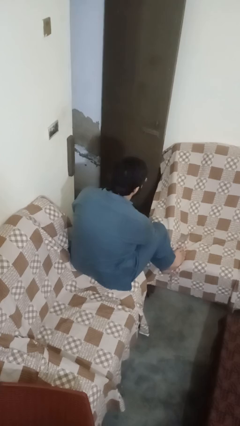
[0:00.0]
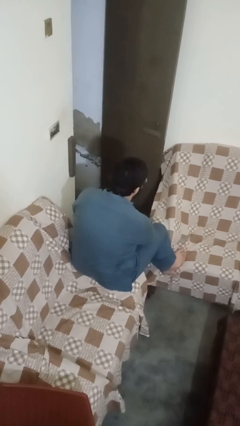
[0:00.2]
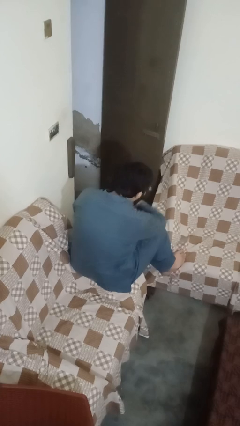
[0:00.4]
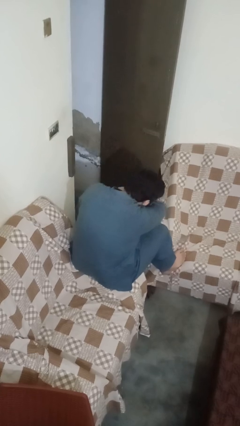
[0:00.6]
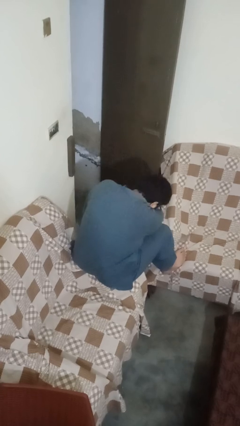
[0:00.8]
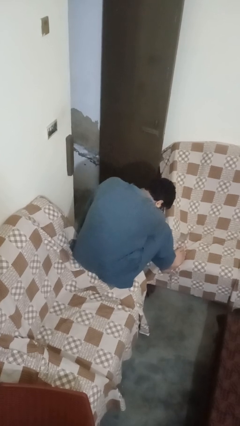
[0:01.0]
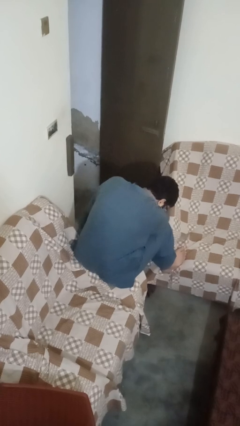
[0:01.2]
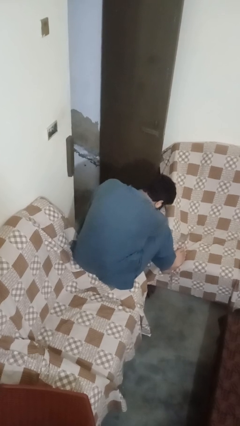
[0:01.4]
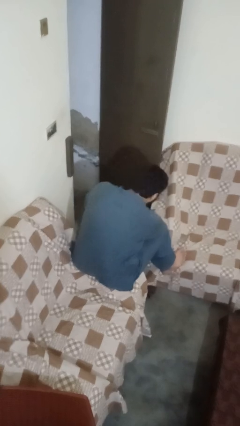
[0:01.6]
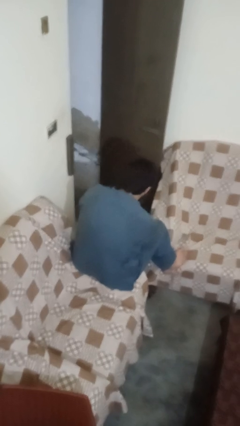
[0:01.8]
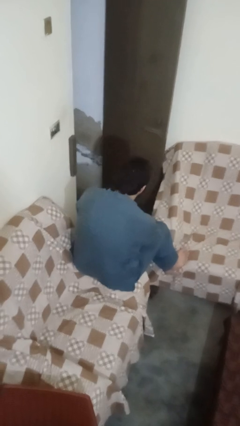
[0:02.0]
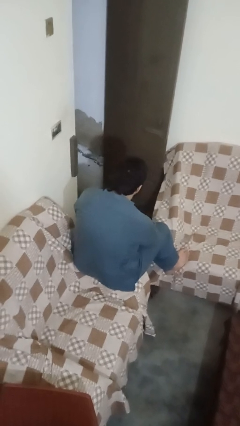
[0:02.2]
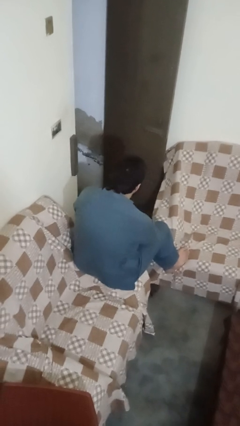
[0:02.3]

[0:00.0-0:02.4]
person sneezes into arm

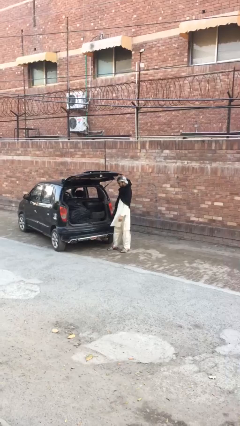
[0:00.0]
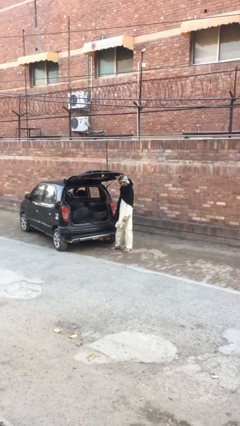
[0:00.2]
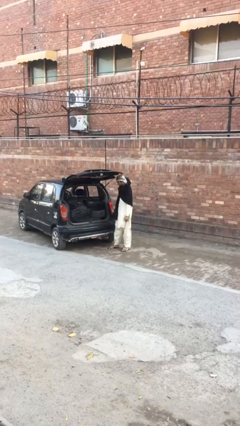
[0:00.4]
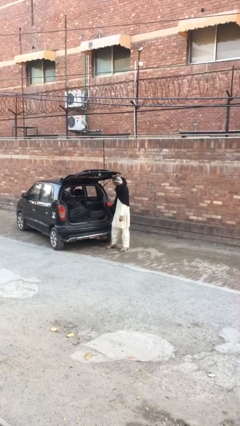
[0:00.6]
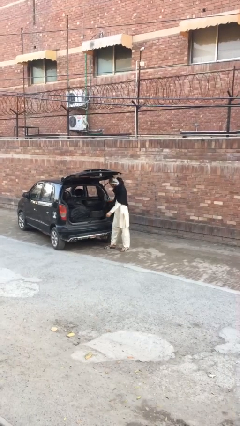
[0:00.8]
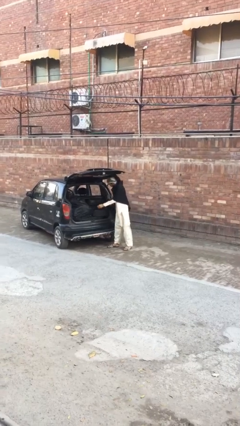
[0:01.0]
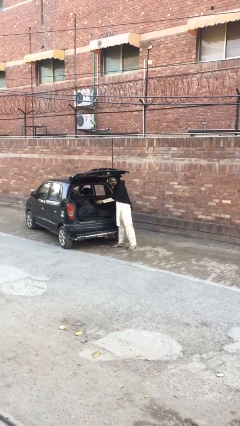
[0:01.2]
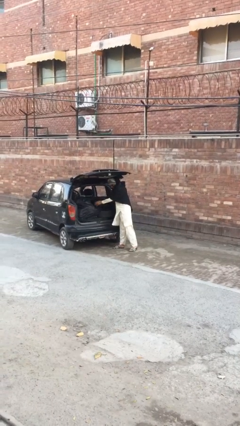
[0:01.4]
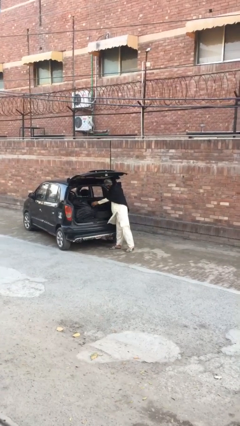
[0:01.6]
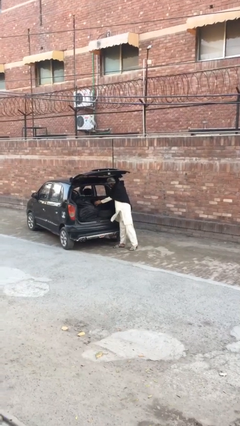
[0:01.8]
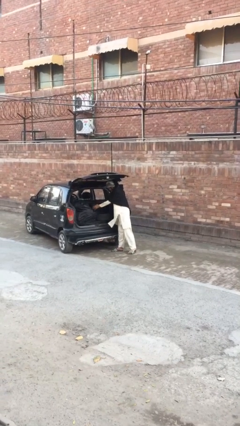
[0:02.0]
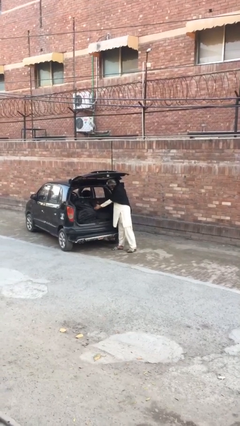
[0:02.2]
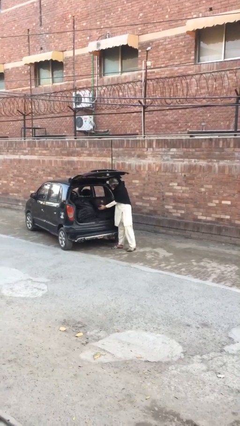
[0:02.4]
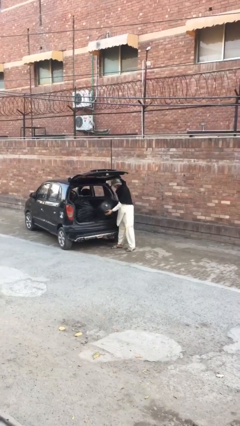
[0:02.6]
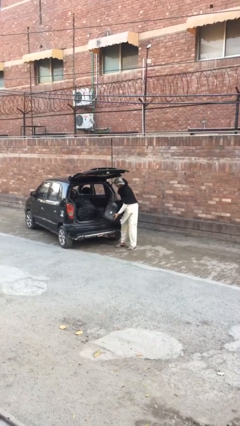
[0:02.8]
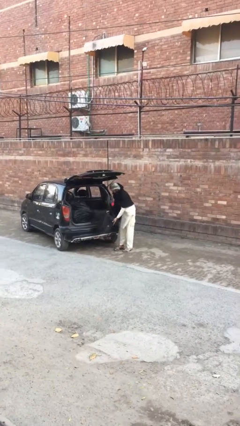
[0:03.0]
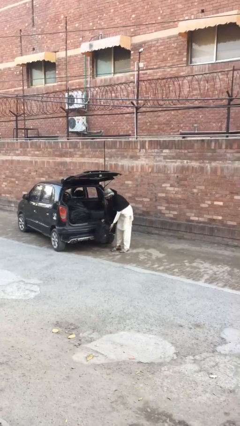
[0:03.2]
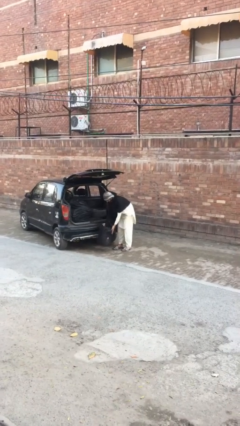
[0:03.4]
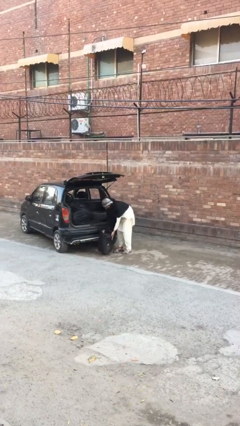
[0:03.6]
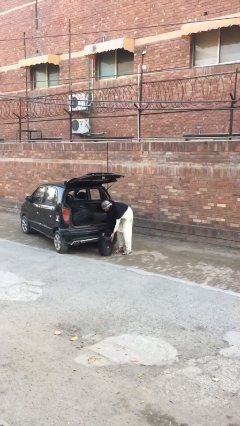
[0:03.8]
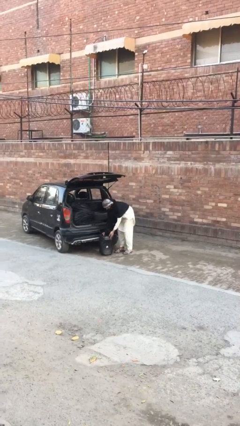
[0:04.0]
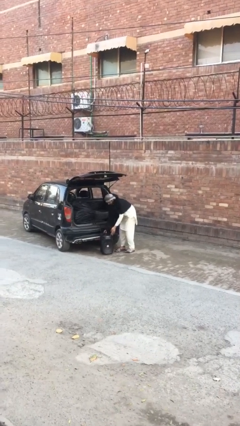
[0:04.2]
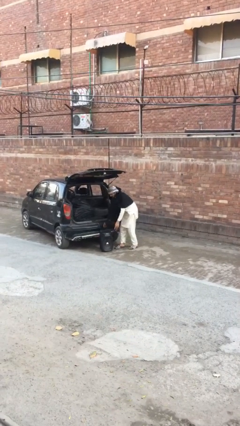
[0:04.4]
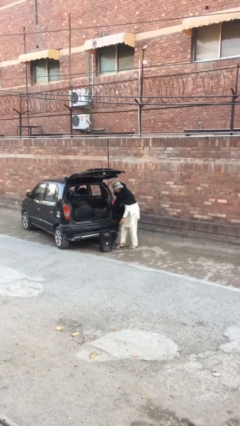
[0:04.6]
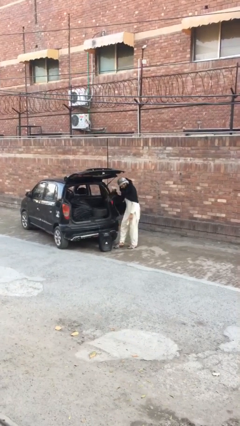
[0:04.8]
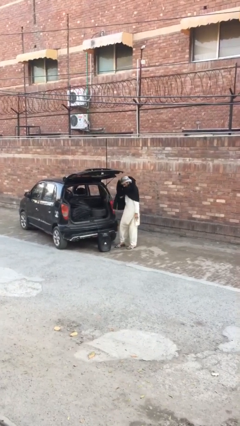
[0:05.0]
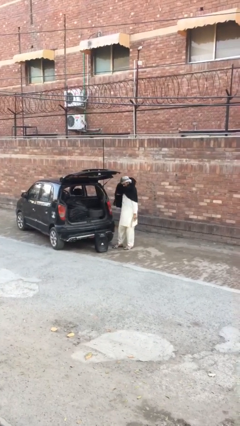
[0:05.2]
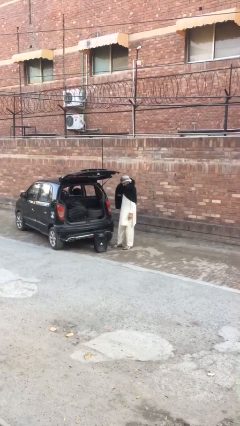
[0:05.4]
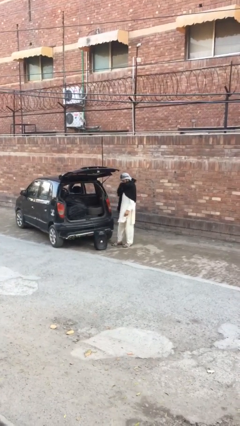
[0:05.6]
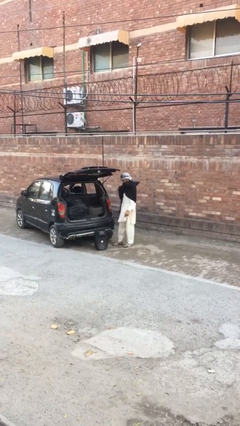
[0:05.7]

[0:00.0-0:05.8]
person unloads car

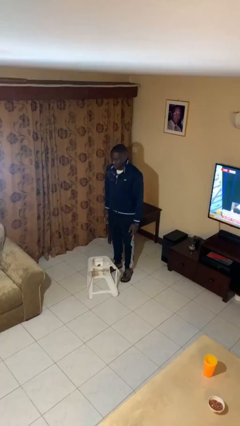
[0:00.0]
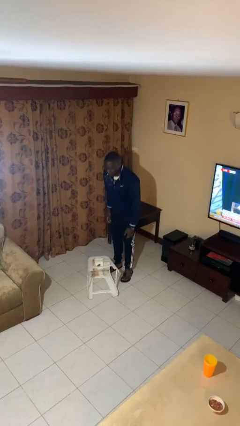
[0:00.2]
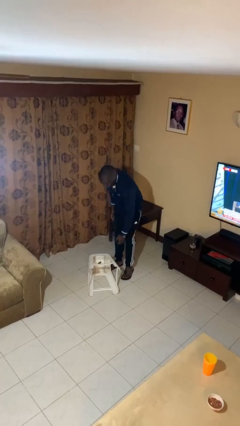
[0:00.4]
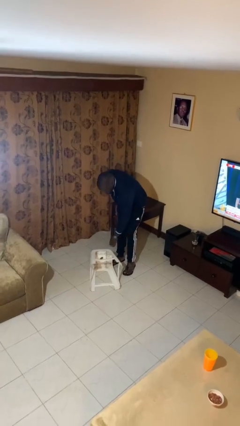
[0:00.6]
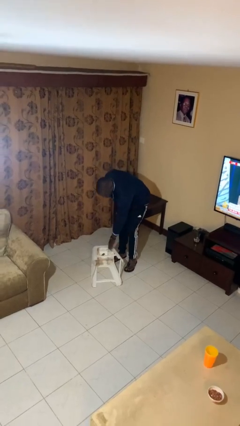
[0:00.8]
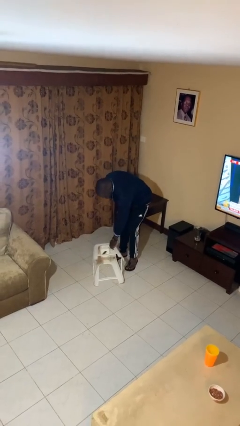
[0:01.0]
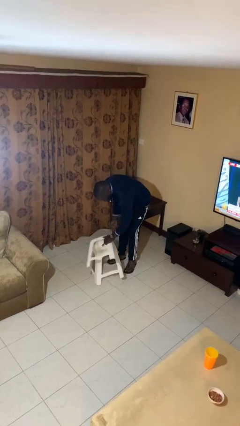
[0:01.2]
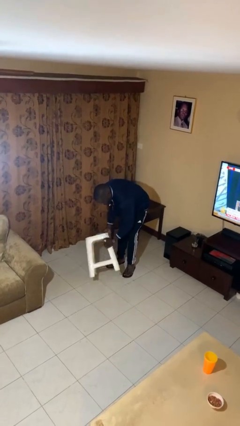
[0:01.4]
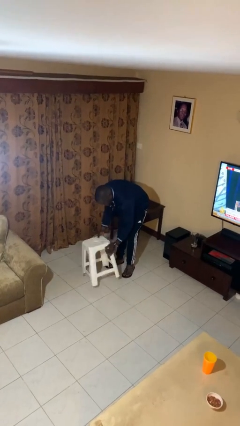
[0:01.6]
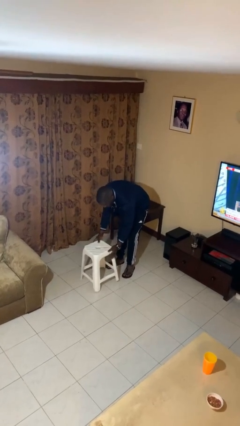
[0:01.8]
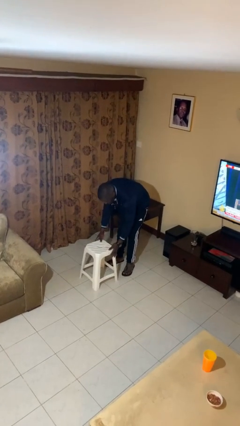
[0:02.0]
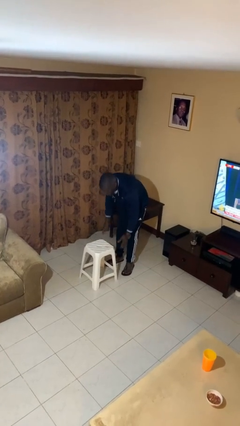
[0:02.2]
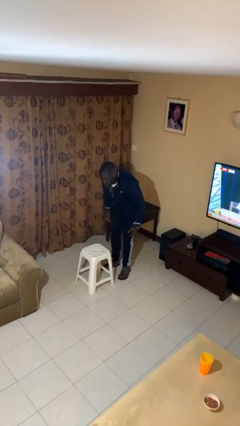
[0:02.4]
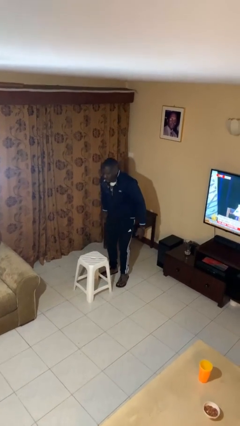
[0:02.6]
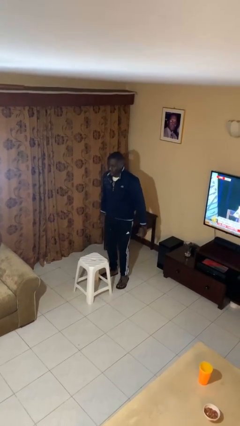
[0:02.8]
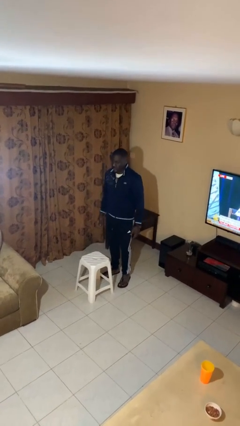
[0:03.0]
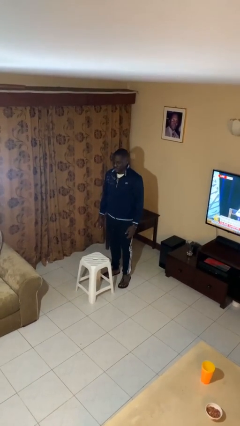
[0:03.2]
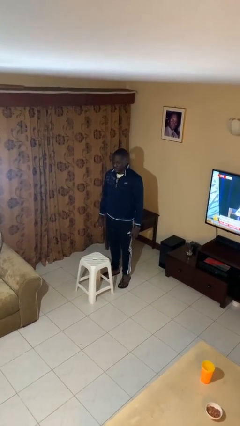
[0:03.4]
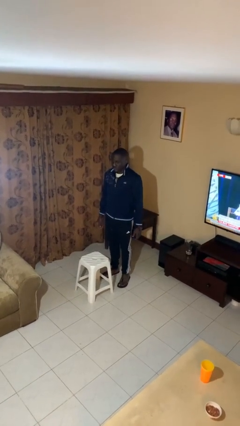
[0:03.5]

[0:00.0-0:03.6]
person sets upright furniture

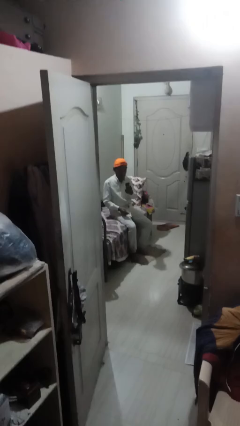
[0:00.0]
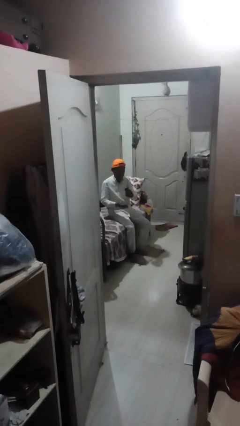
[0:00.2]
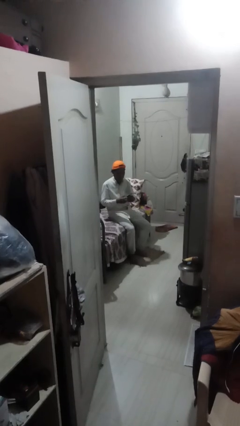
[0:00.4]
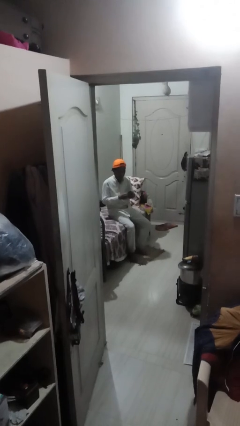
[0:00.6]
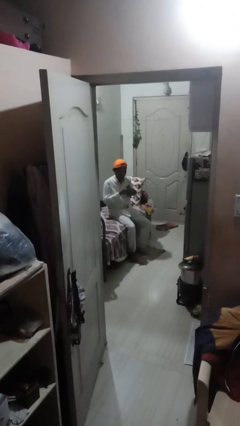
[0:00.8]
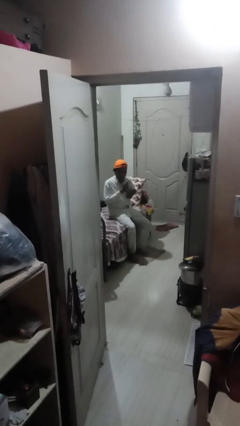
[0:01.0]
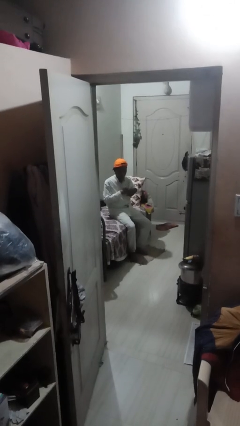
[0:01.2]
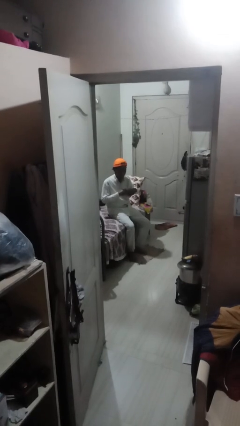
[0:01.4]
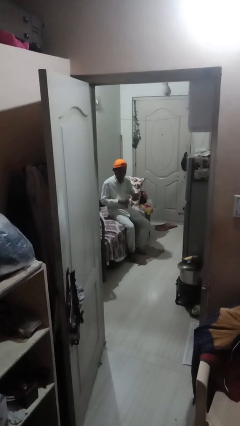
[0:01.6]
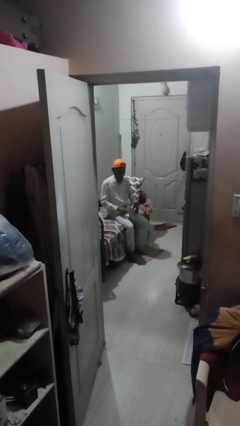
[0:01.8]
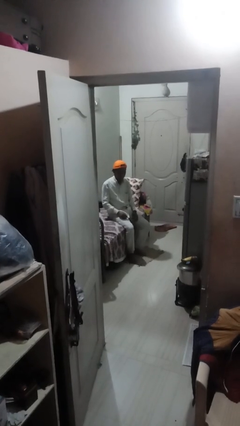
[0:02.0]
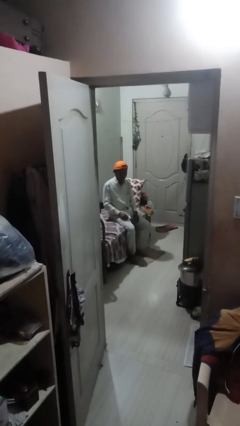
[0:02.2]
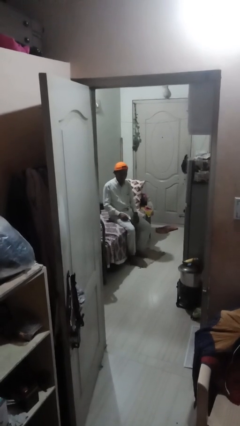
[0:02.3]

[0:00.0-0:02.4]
person puts phone into pocket

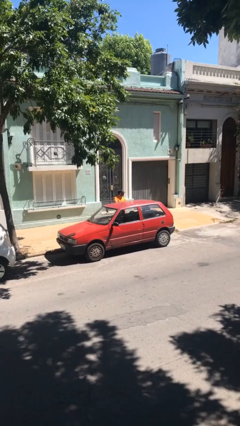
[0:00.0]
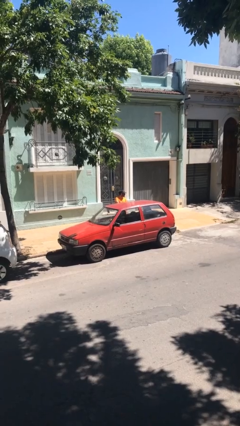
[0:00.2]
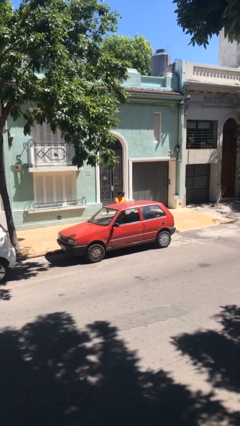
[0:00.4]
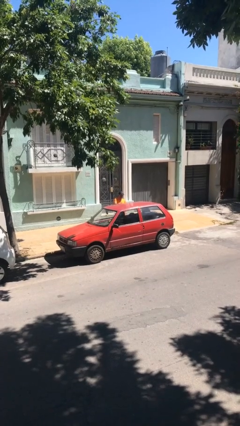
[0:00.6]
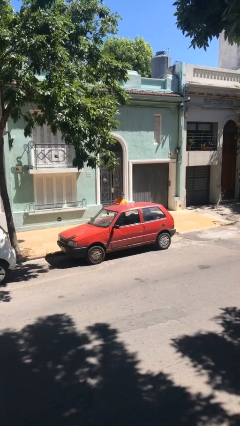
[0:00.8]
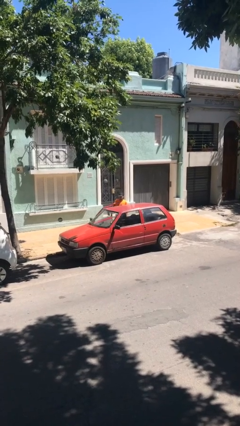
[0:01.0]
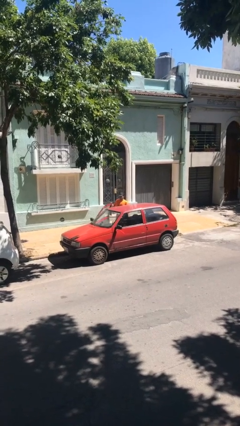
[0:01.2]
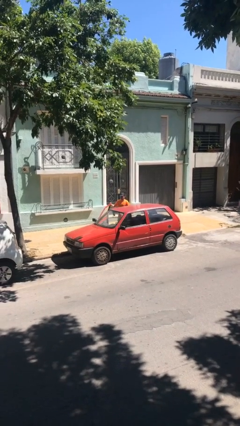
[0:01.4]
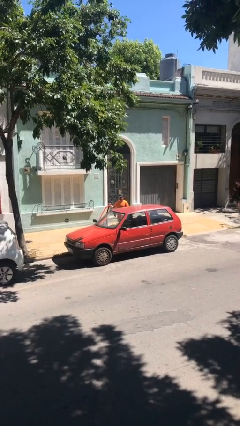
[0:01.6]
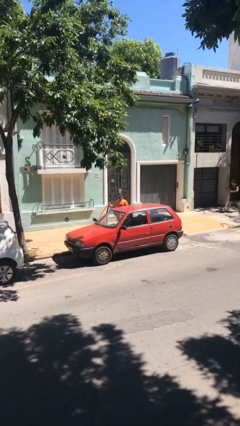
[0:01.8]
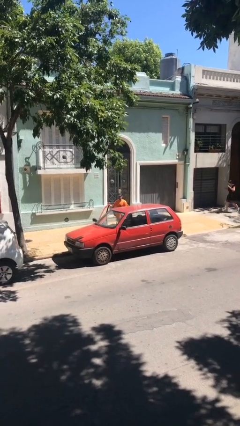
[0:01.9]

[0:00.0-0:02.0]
person opens car door

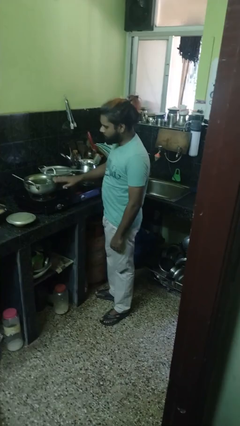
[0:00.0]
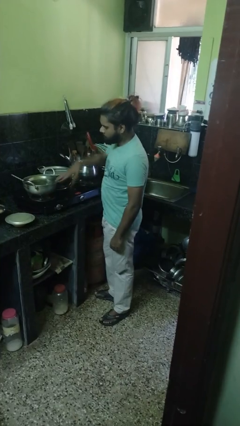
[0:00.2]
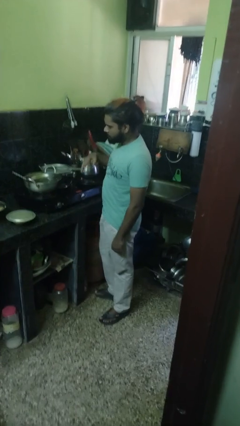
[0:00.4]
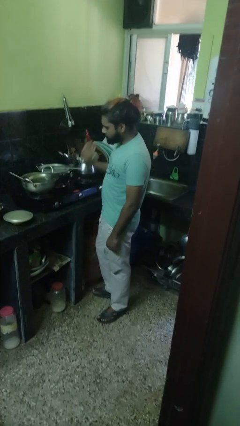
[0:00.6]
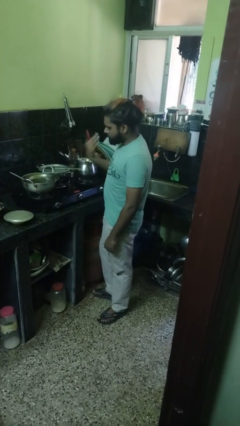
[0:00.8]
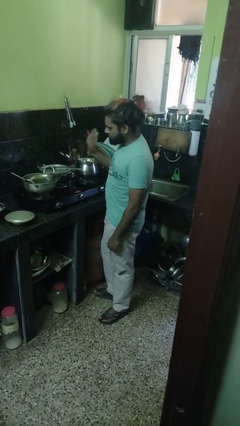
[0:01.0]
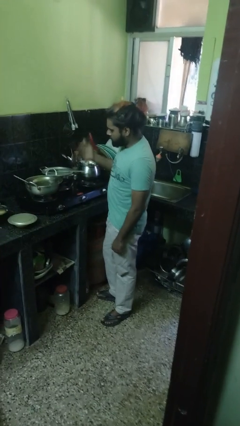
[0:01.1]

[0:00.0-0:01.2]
person burns hand

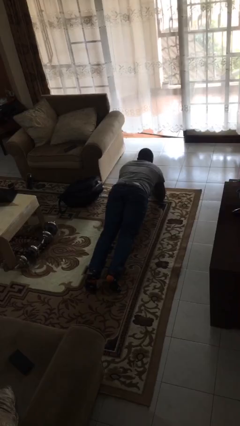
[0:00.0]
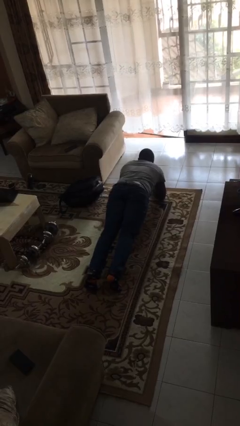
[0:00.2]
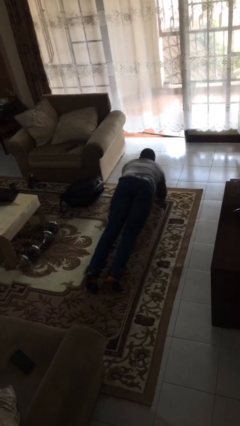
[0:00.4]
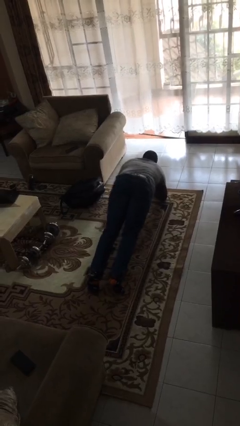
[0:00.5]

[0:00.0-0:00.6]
person stands up from floor
